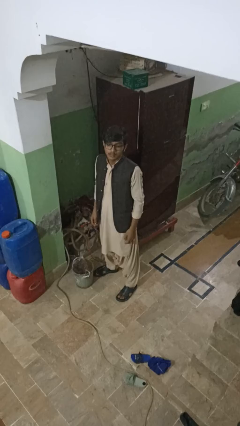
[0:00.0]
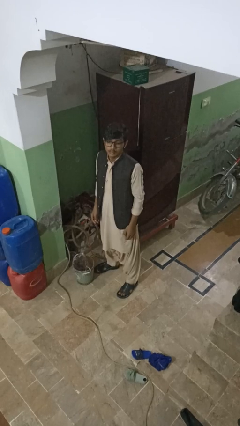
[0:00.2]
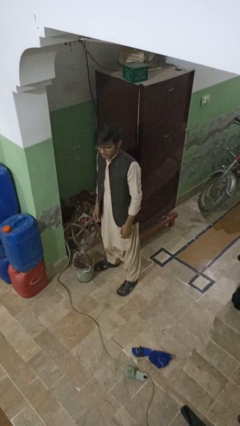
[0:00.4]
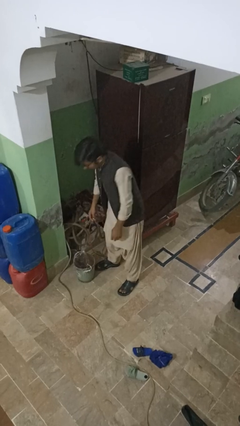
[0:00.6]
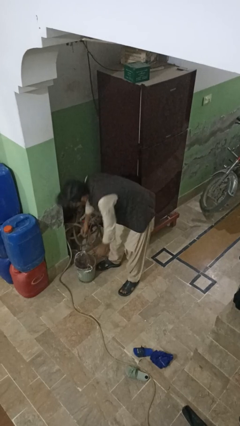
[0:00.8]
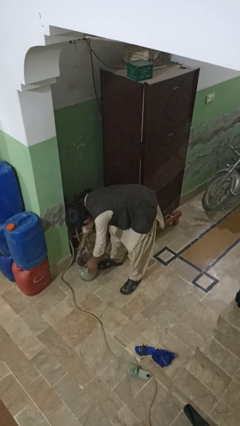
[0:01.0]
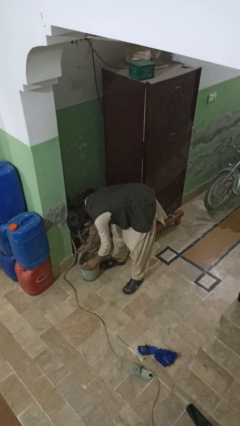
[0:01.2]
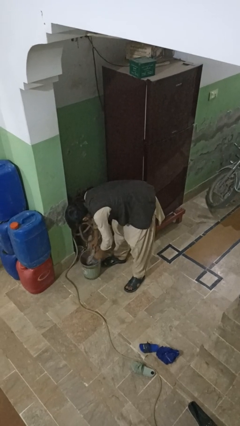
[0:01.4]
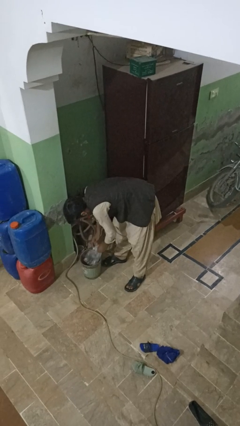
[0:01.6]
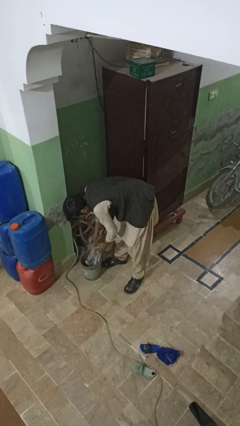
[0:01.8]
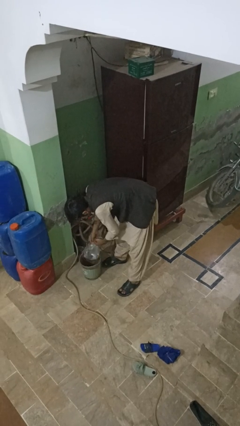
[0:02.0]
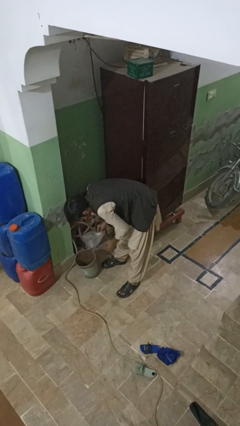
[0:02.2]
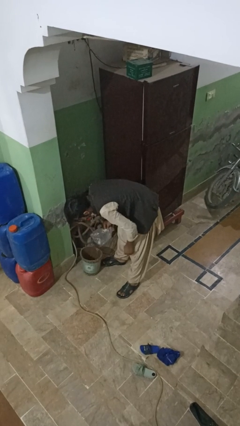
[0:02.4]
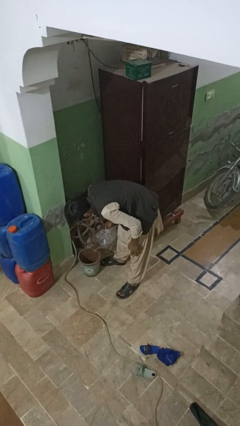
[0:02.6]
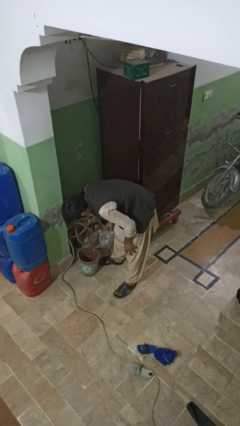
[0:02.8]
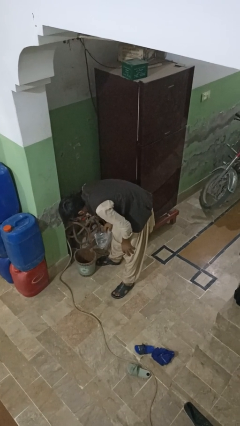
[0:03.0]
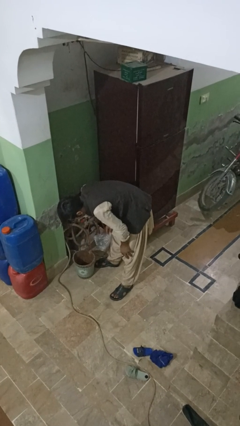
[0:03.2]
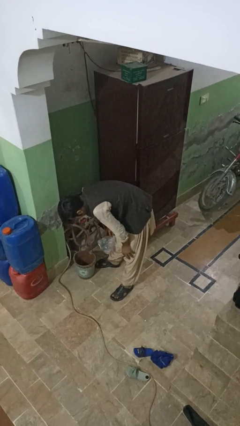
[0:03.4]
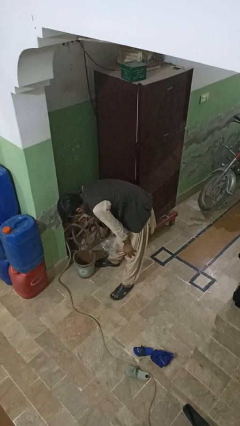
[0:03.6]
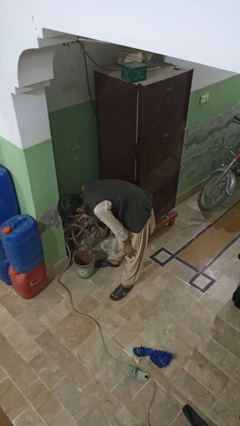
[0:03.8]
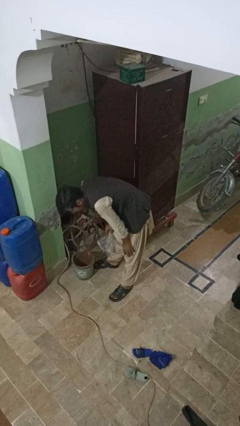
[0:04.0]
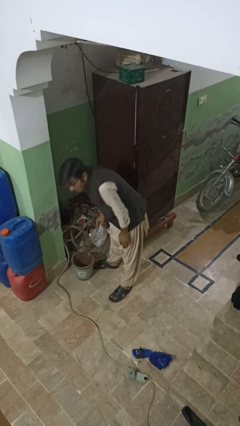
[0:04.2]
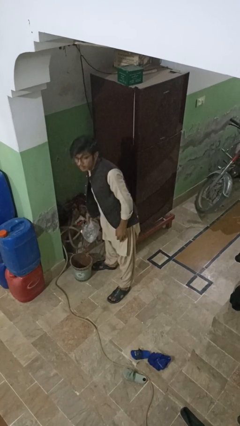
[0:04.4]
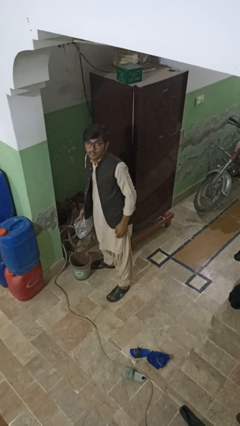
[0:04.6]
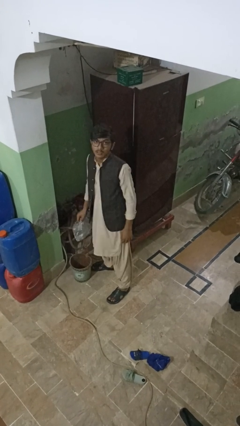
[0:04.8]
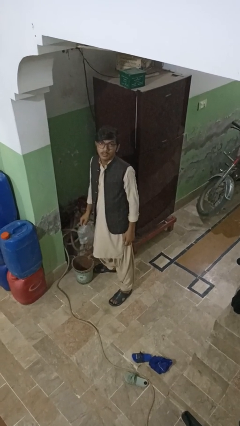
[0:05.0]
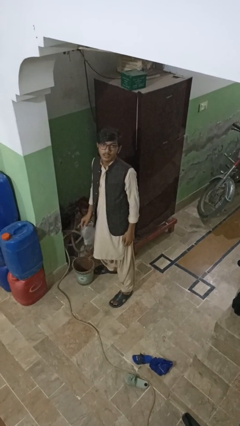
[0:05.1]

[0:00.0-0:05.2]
person removes trashbag from trashcan

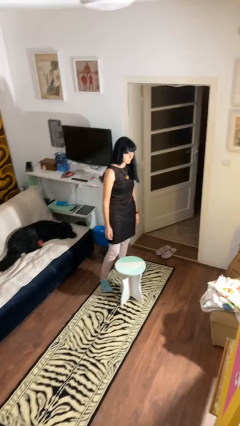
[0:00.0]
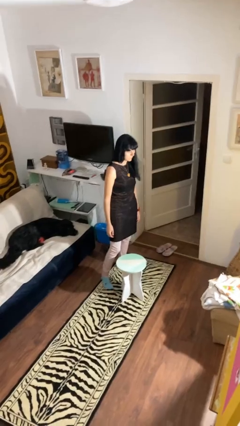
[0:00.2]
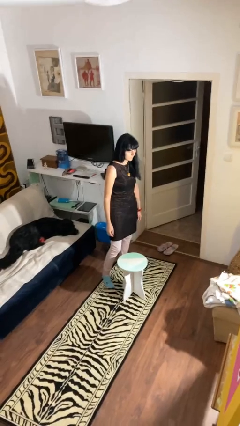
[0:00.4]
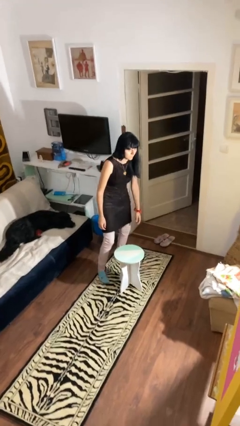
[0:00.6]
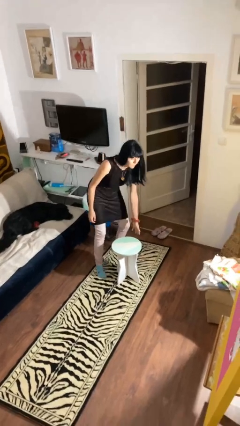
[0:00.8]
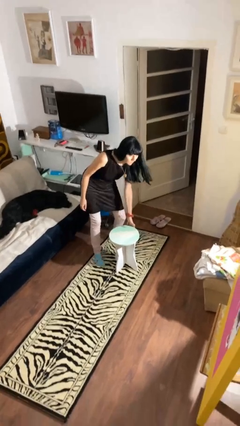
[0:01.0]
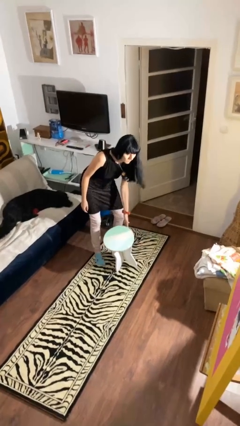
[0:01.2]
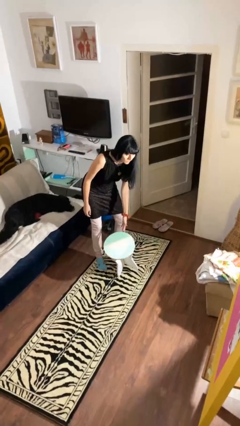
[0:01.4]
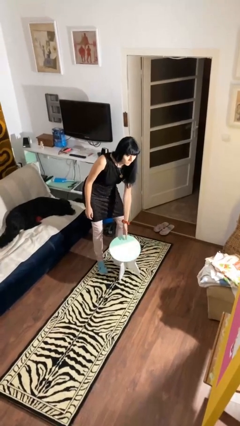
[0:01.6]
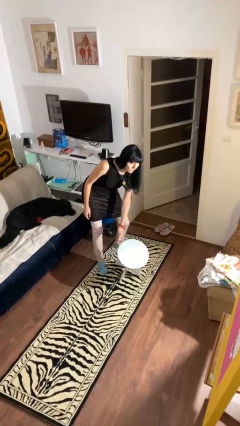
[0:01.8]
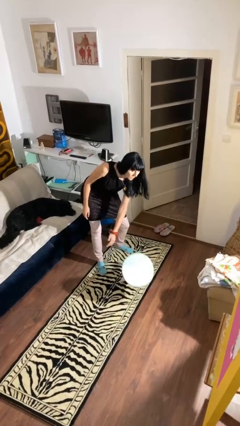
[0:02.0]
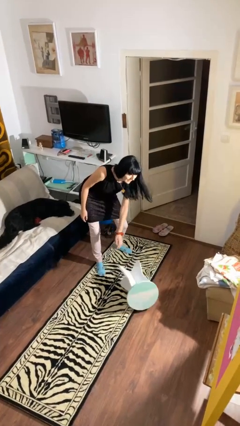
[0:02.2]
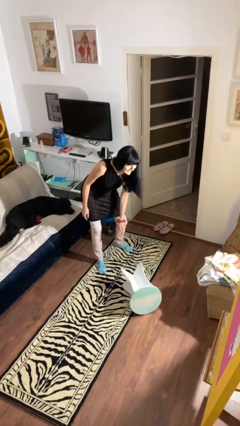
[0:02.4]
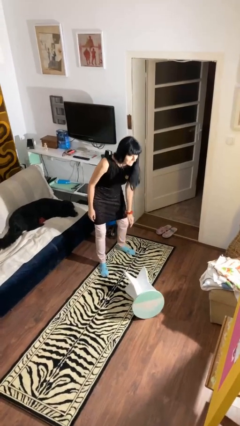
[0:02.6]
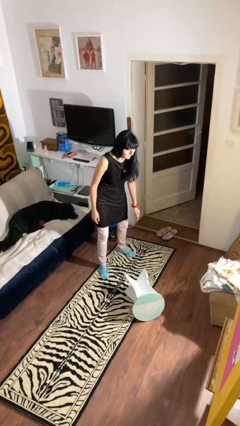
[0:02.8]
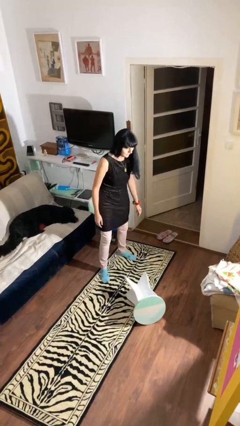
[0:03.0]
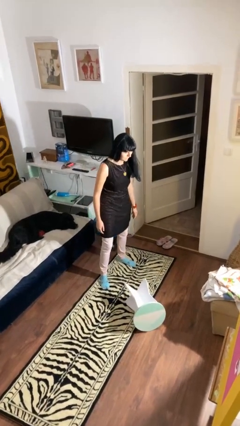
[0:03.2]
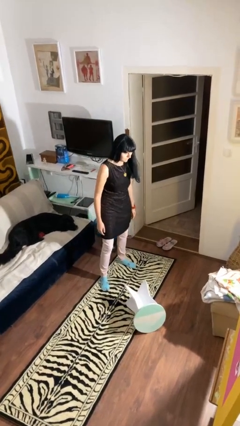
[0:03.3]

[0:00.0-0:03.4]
person knocks over furniture

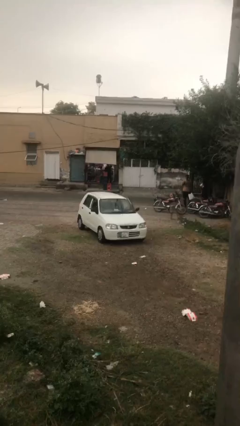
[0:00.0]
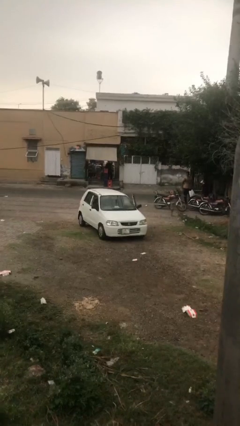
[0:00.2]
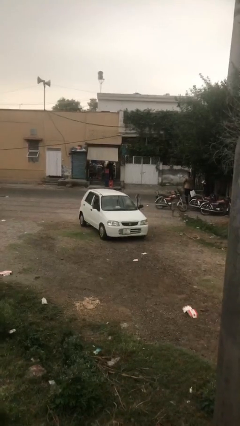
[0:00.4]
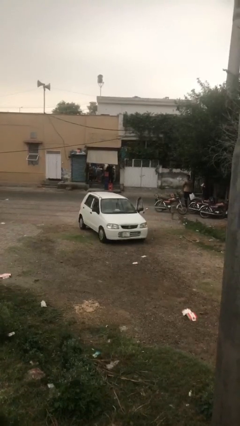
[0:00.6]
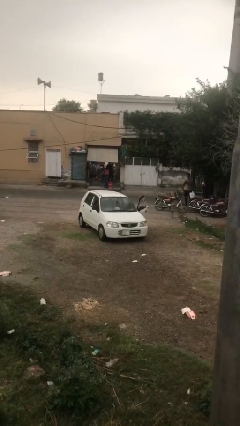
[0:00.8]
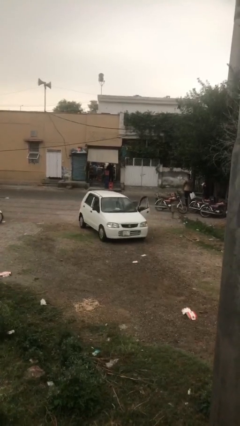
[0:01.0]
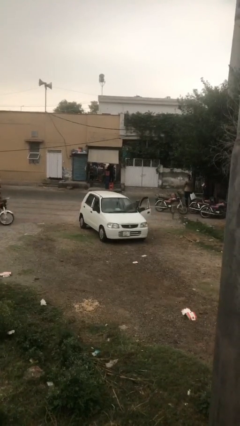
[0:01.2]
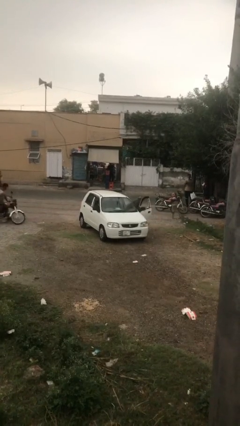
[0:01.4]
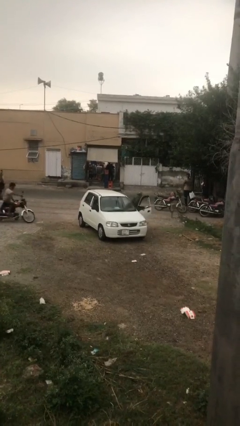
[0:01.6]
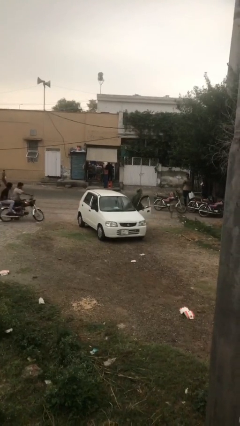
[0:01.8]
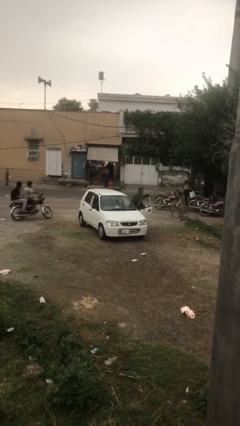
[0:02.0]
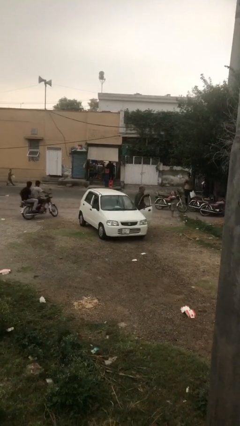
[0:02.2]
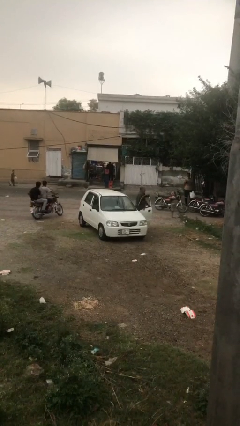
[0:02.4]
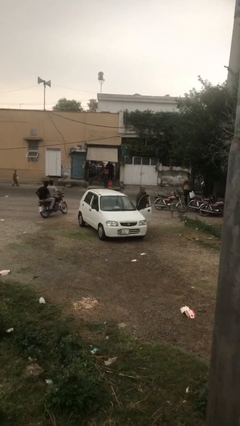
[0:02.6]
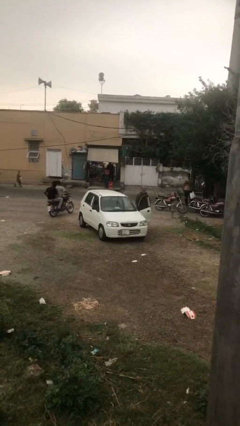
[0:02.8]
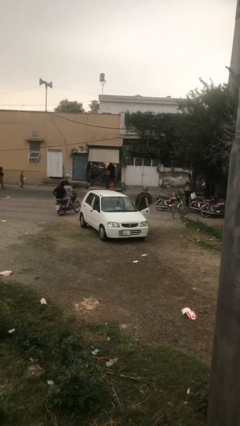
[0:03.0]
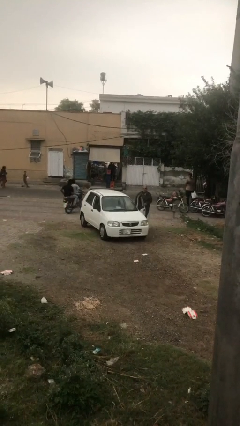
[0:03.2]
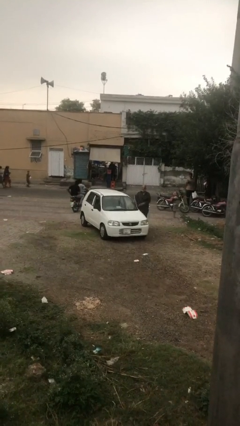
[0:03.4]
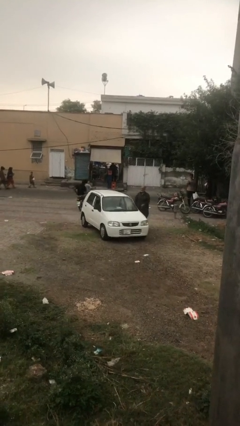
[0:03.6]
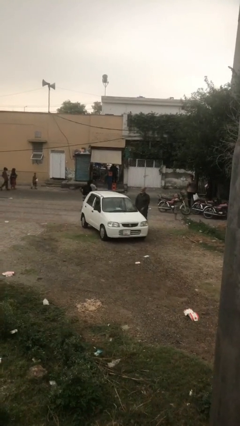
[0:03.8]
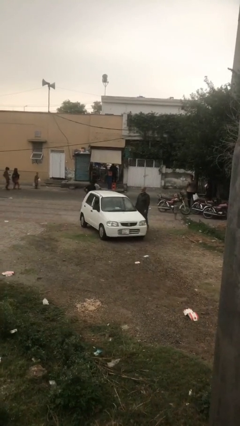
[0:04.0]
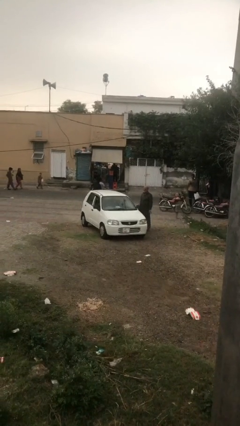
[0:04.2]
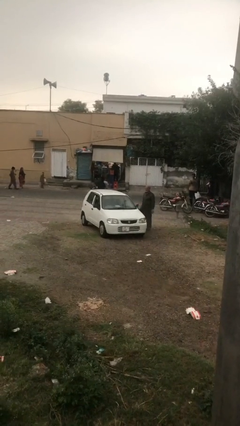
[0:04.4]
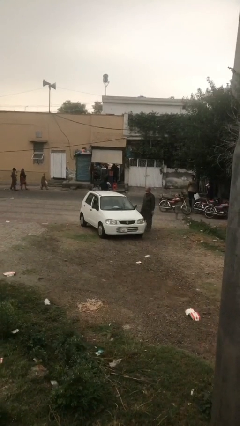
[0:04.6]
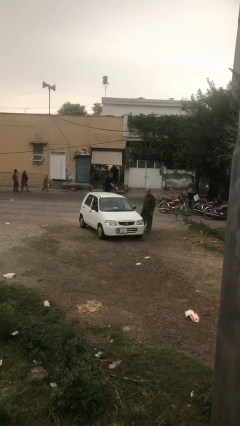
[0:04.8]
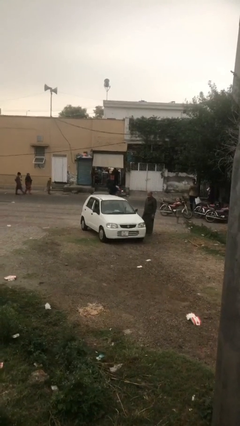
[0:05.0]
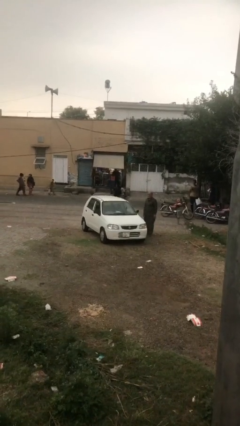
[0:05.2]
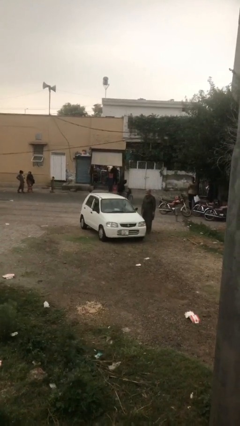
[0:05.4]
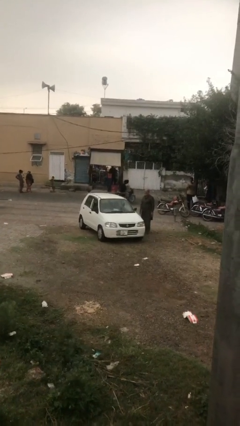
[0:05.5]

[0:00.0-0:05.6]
car drops off person

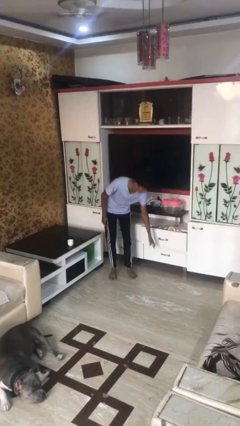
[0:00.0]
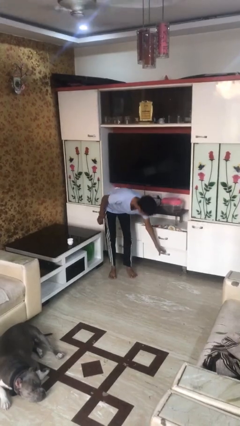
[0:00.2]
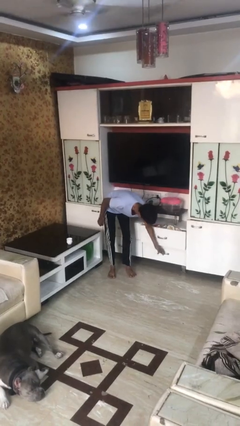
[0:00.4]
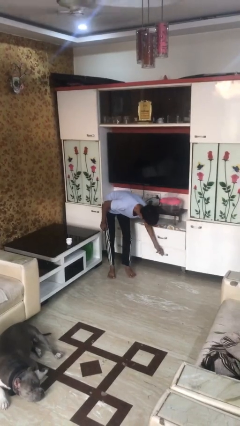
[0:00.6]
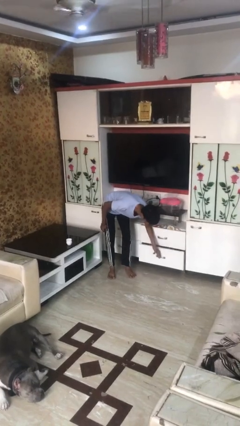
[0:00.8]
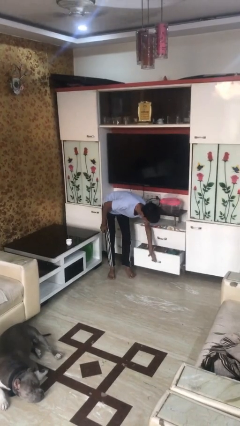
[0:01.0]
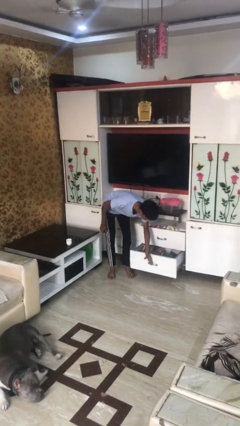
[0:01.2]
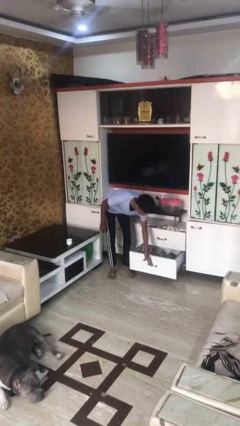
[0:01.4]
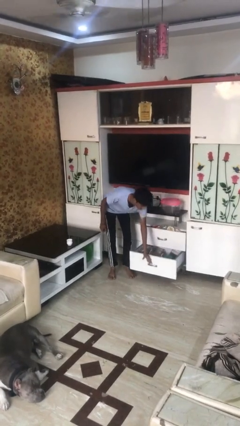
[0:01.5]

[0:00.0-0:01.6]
person opens dresser drawer

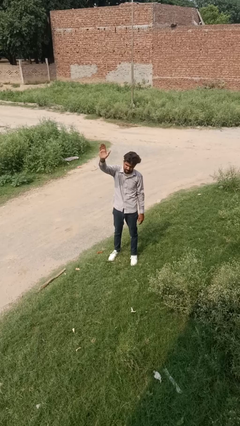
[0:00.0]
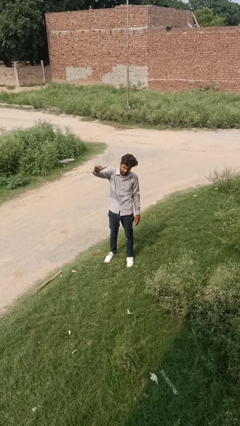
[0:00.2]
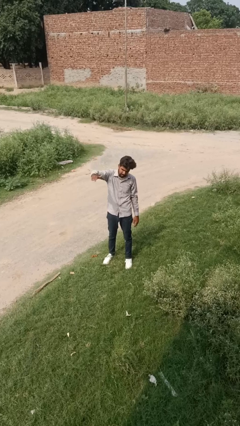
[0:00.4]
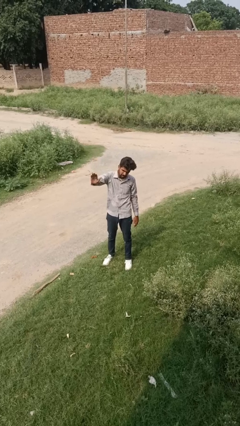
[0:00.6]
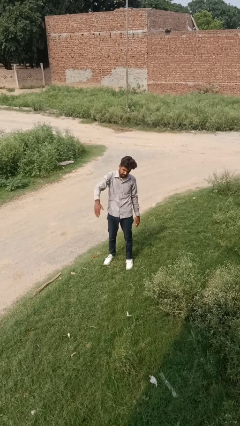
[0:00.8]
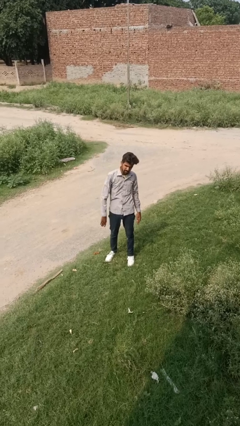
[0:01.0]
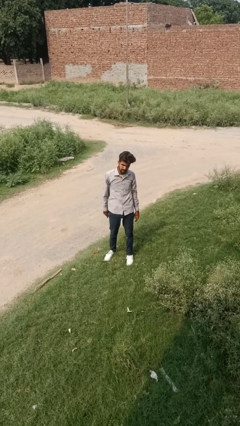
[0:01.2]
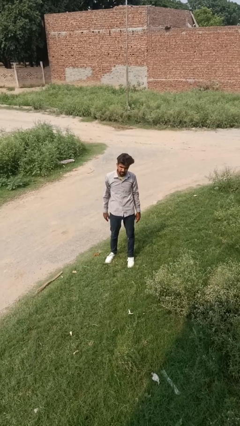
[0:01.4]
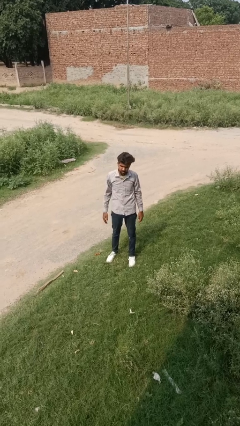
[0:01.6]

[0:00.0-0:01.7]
person gestures swipe down
